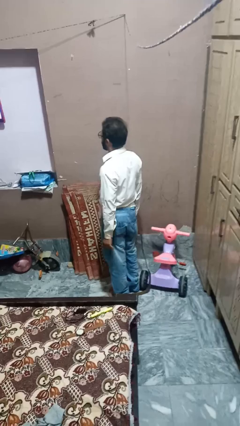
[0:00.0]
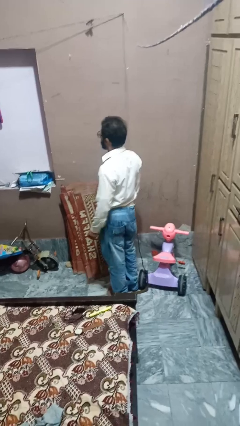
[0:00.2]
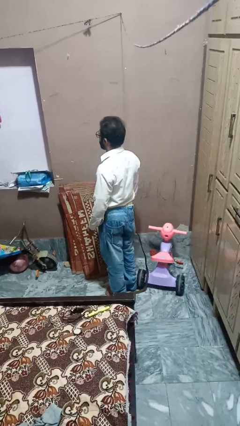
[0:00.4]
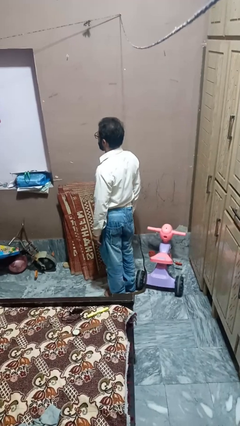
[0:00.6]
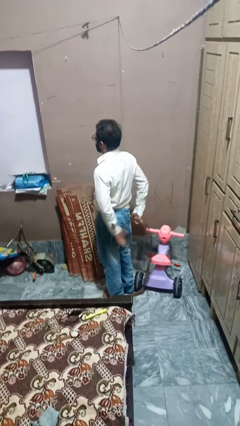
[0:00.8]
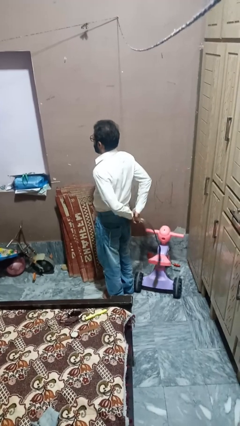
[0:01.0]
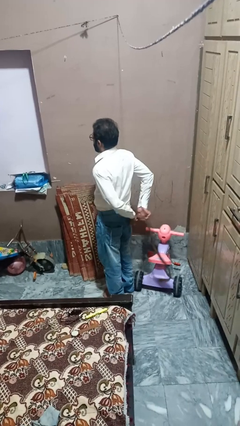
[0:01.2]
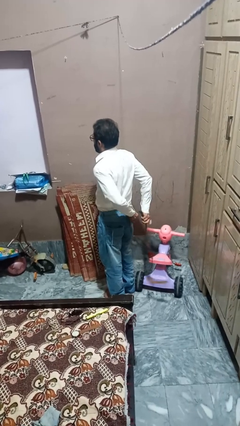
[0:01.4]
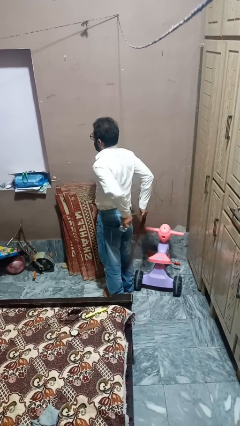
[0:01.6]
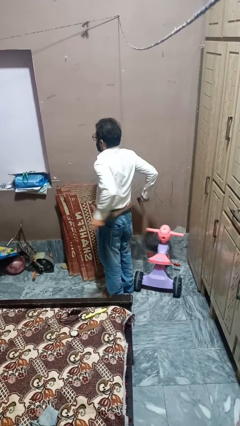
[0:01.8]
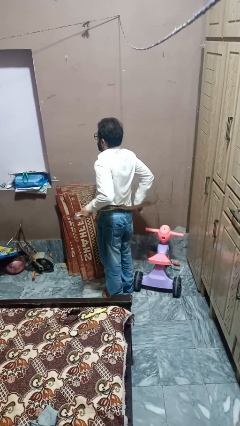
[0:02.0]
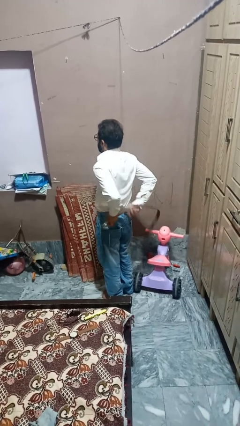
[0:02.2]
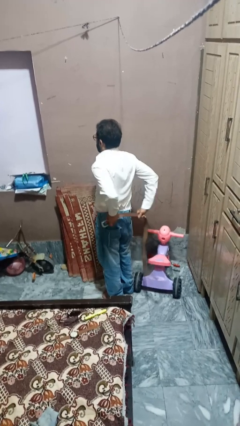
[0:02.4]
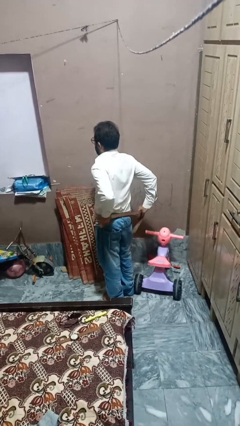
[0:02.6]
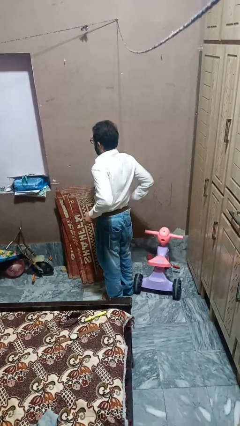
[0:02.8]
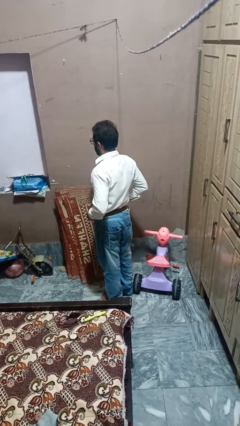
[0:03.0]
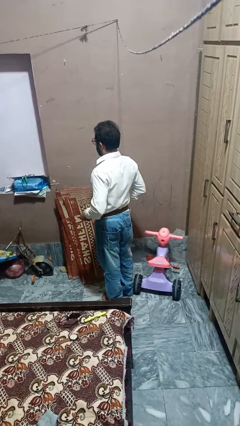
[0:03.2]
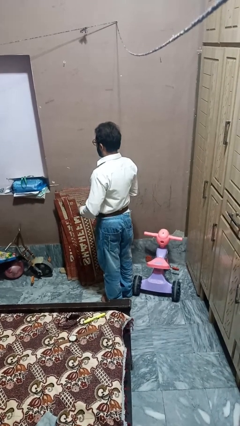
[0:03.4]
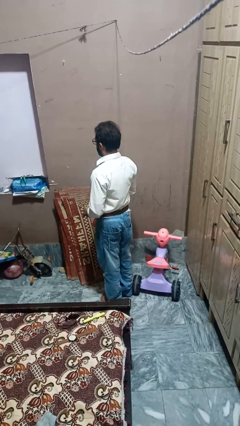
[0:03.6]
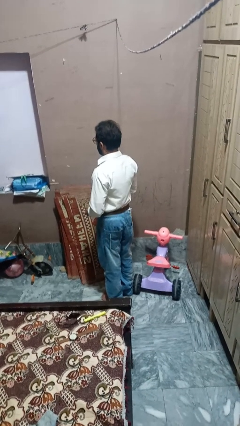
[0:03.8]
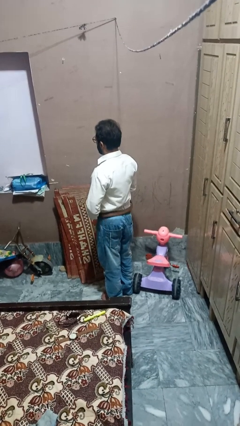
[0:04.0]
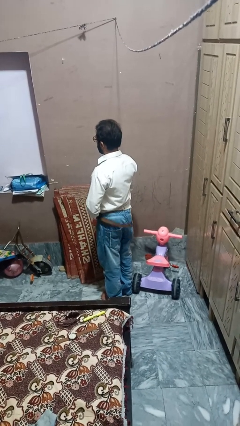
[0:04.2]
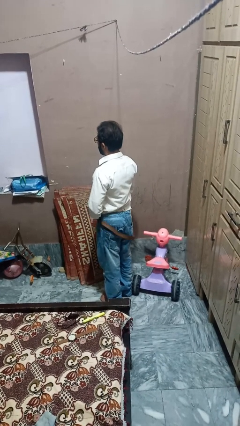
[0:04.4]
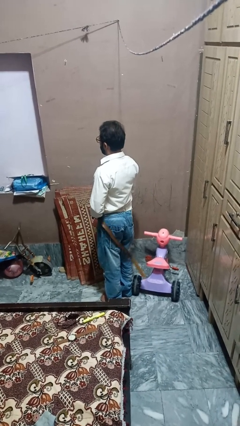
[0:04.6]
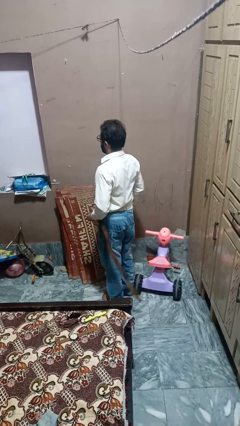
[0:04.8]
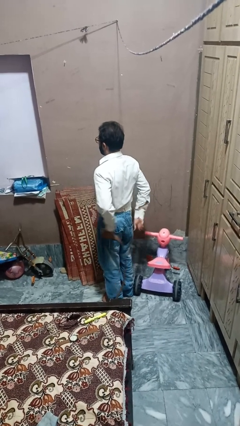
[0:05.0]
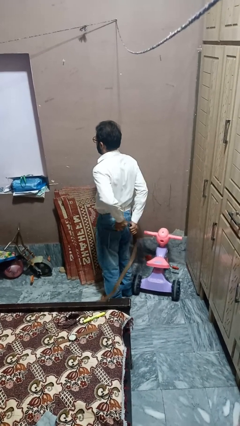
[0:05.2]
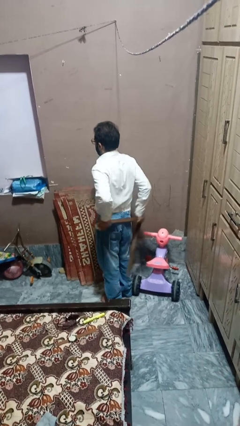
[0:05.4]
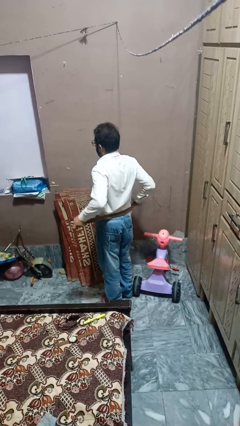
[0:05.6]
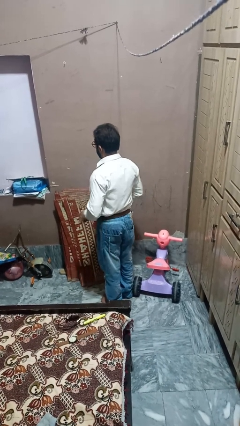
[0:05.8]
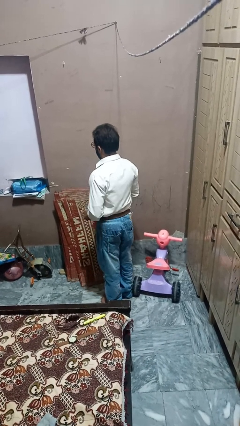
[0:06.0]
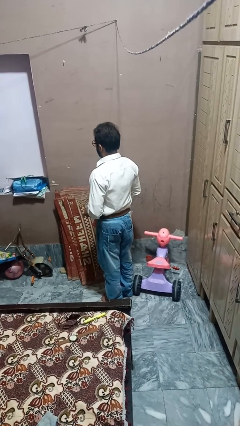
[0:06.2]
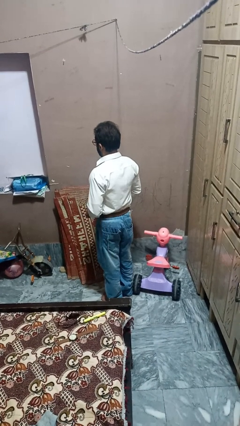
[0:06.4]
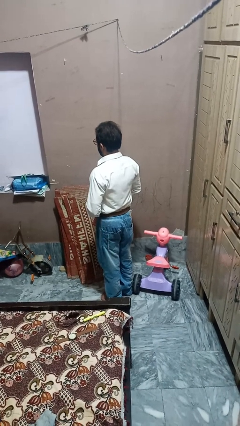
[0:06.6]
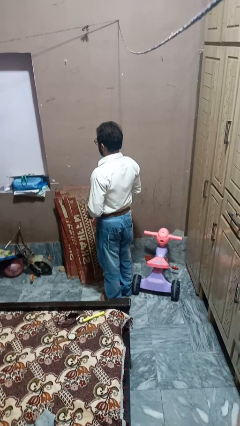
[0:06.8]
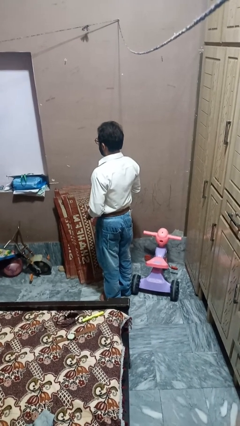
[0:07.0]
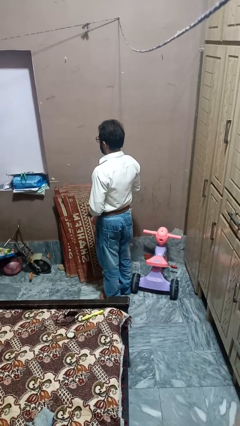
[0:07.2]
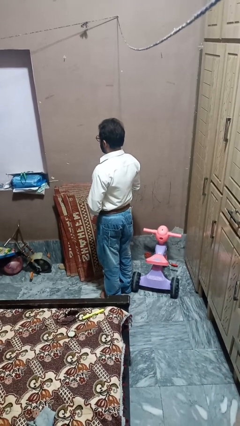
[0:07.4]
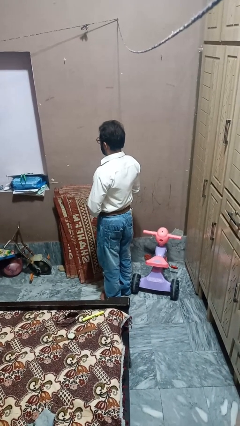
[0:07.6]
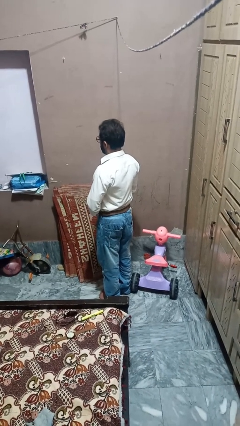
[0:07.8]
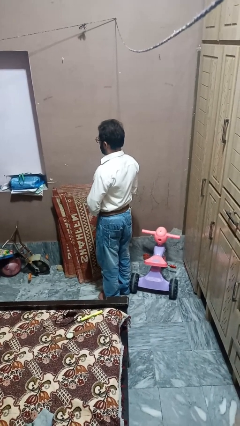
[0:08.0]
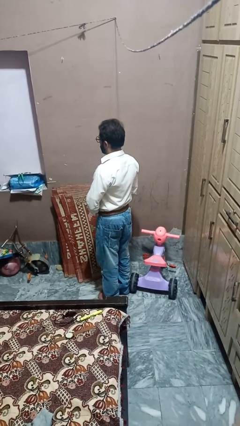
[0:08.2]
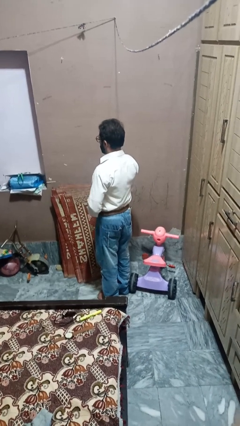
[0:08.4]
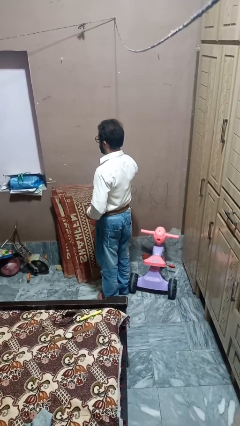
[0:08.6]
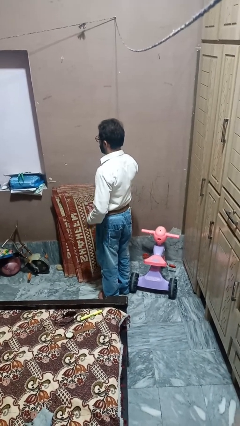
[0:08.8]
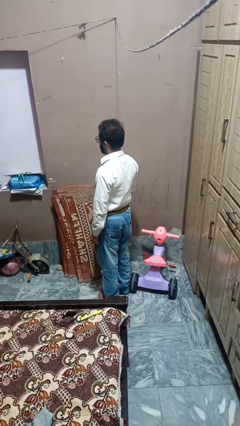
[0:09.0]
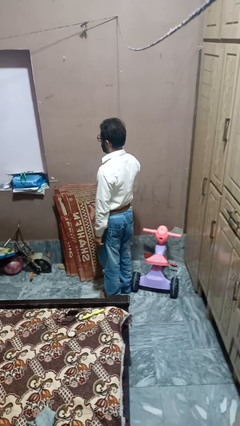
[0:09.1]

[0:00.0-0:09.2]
person puts on belt

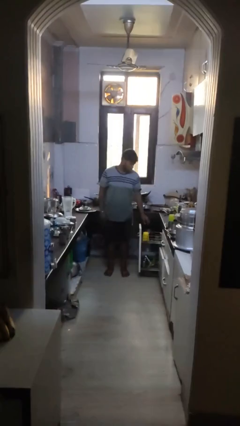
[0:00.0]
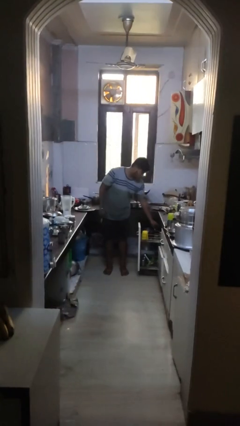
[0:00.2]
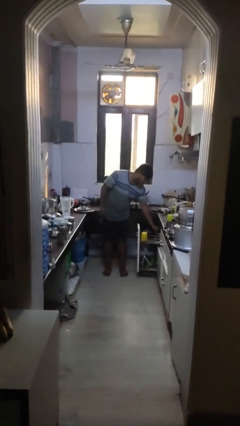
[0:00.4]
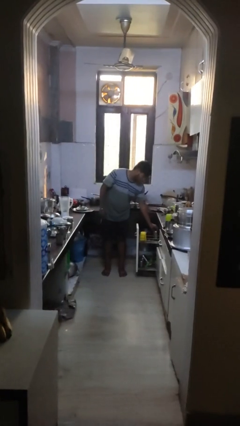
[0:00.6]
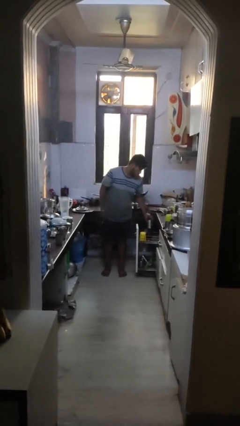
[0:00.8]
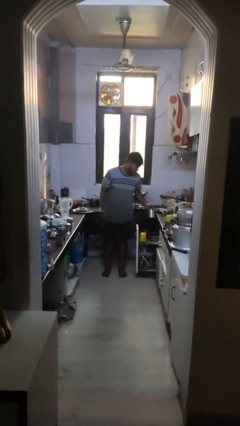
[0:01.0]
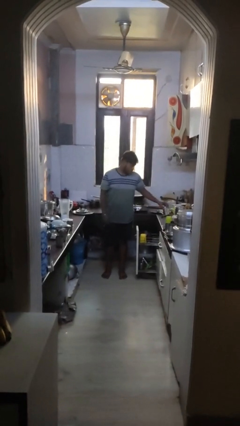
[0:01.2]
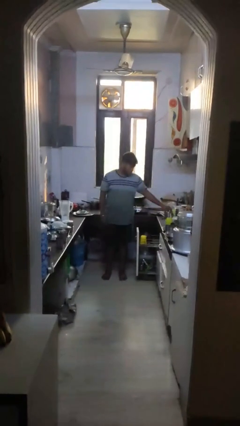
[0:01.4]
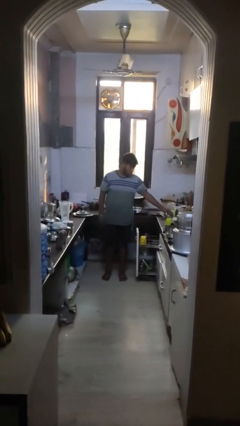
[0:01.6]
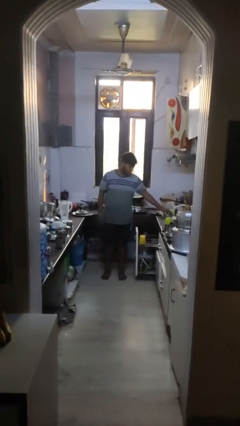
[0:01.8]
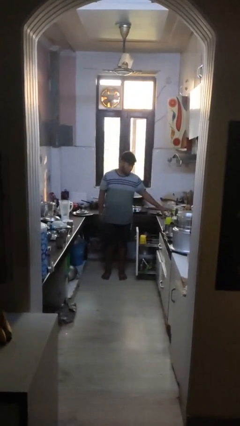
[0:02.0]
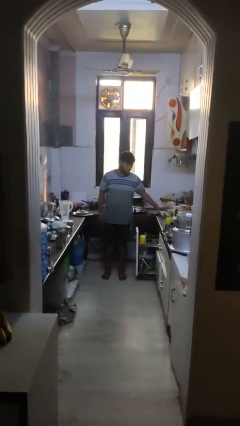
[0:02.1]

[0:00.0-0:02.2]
person unloads dishwasher

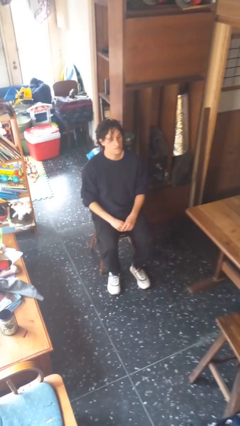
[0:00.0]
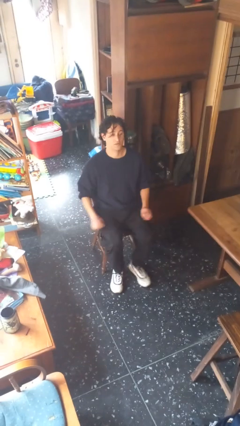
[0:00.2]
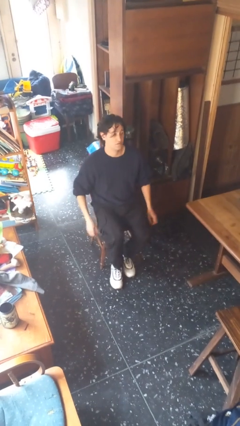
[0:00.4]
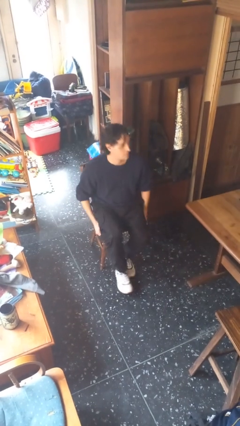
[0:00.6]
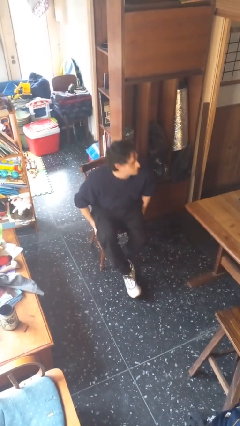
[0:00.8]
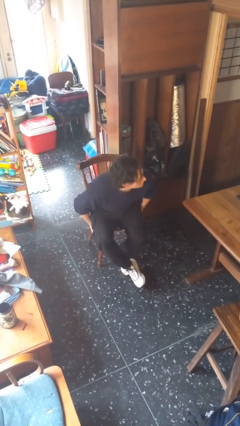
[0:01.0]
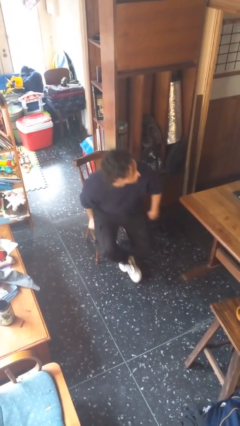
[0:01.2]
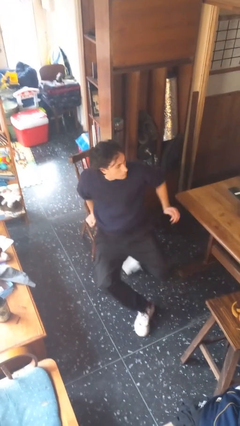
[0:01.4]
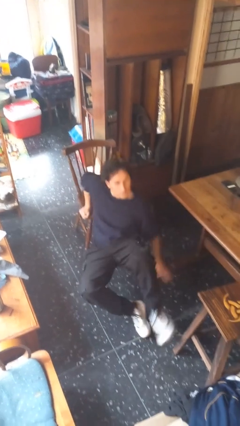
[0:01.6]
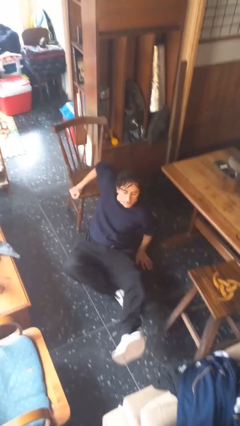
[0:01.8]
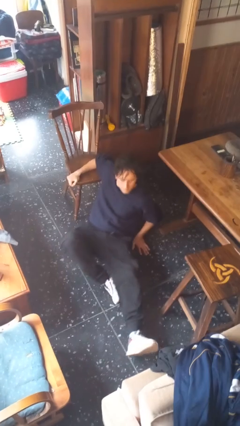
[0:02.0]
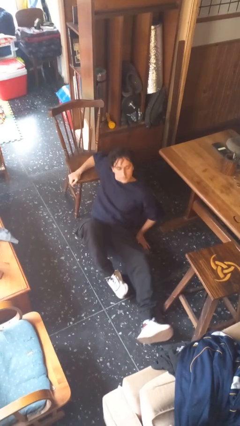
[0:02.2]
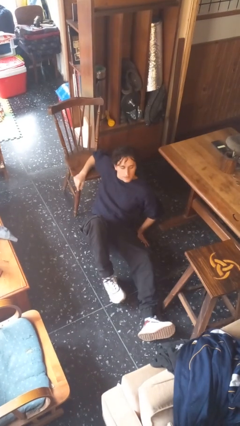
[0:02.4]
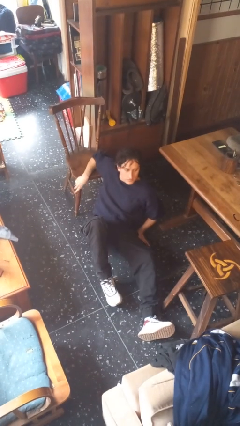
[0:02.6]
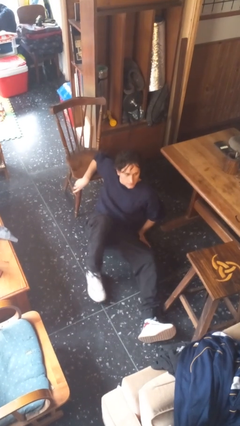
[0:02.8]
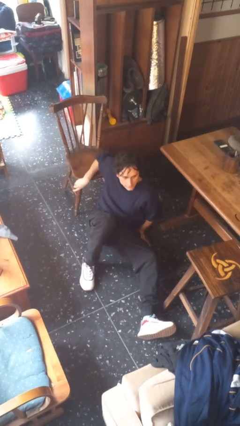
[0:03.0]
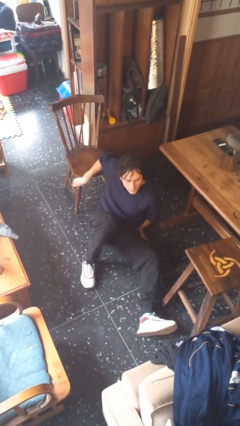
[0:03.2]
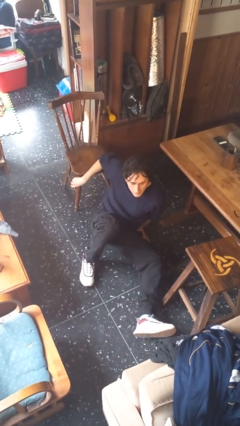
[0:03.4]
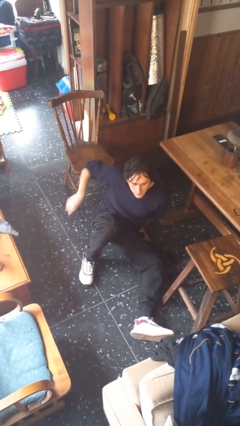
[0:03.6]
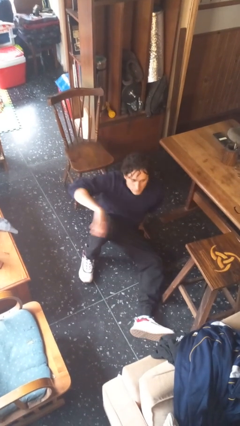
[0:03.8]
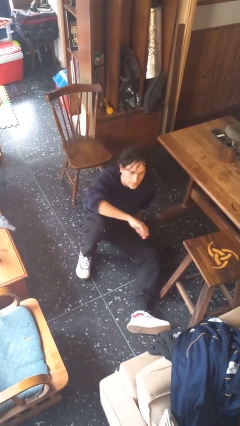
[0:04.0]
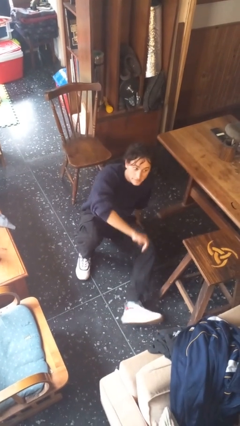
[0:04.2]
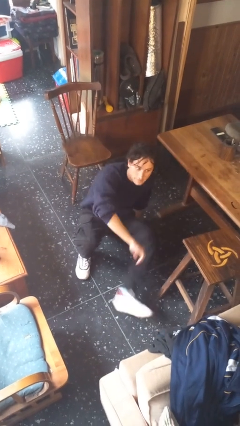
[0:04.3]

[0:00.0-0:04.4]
person falls from chair

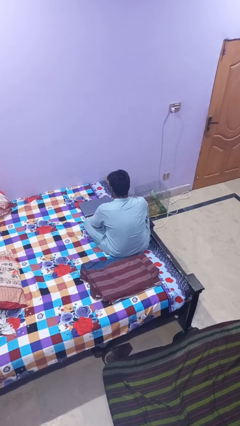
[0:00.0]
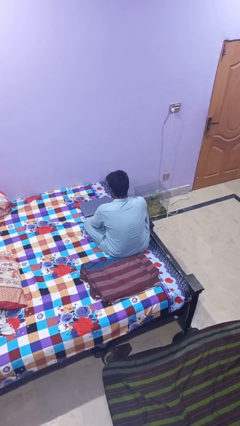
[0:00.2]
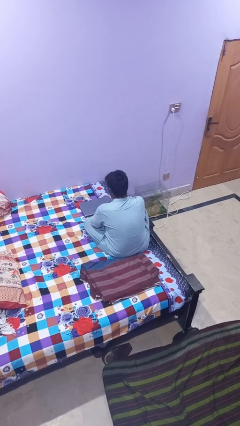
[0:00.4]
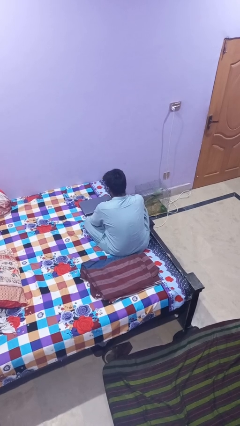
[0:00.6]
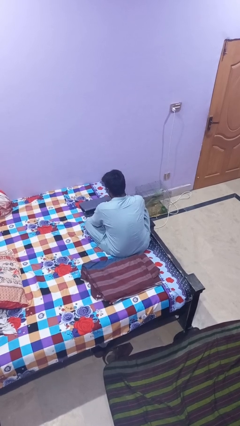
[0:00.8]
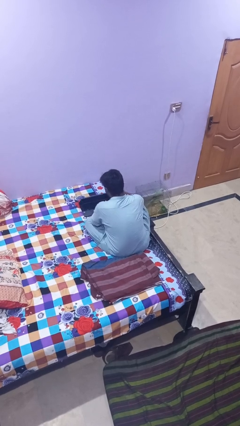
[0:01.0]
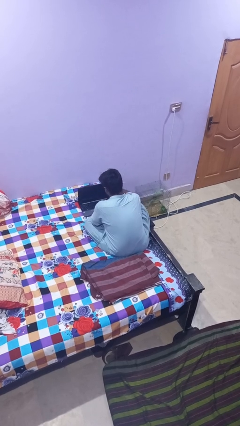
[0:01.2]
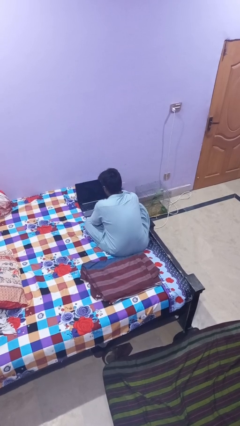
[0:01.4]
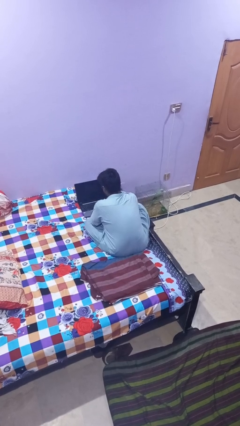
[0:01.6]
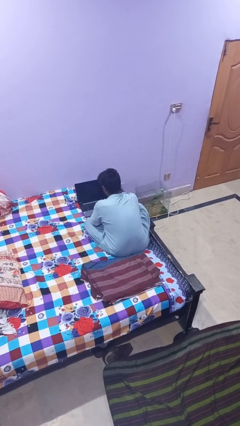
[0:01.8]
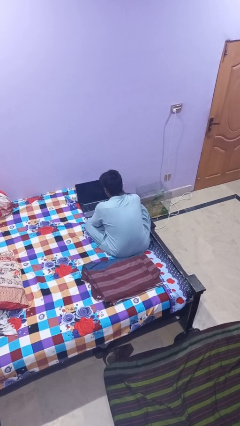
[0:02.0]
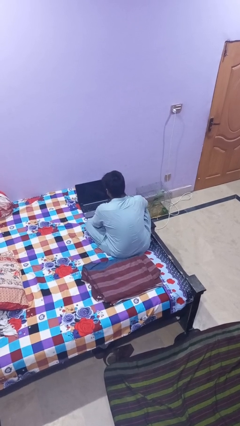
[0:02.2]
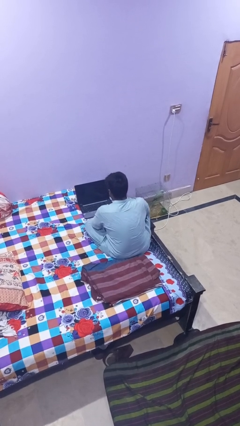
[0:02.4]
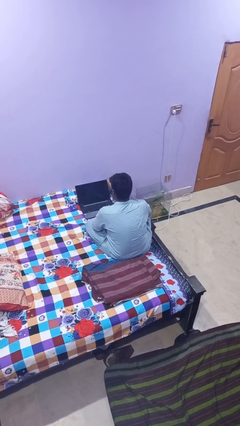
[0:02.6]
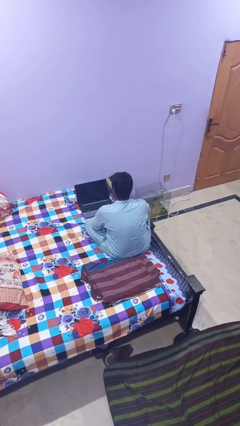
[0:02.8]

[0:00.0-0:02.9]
person opens laptop
